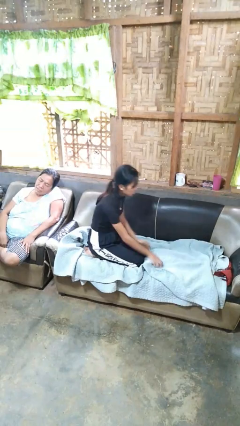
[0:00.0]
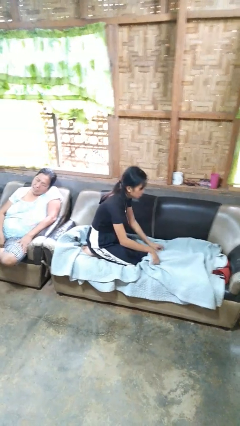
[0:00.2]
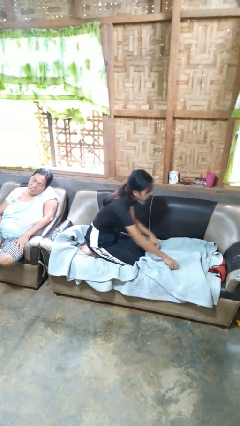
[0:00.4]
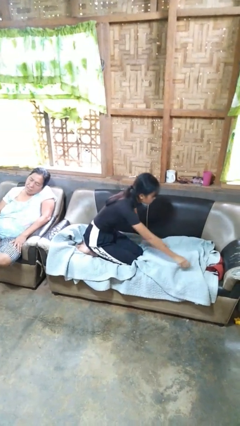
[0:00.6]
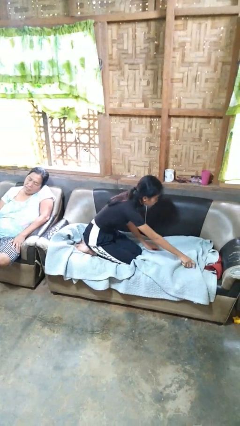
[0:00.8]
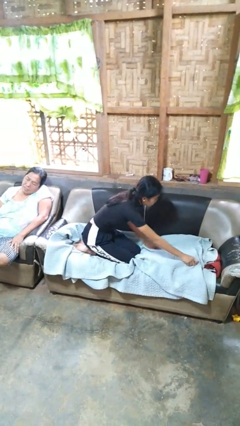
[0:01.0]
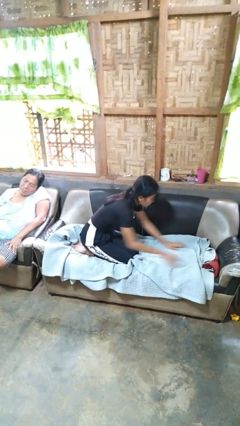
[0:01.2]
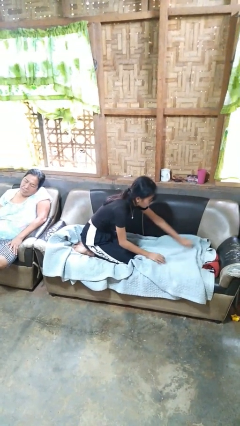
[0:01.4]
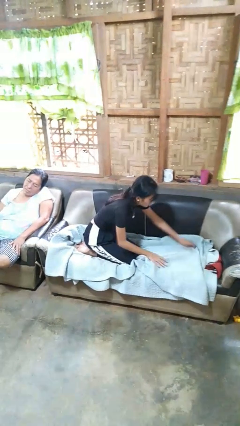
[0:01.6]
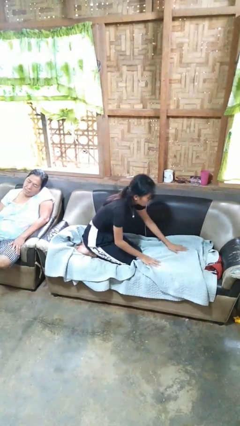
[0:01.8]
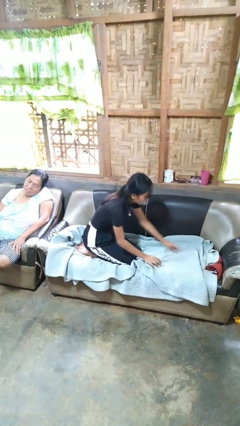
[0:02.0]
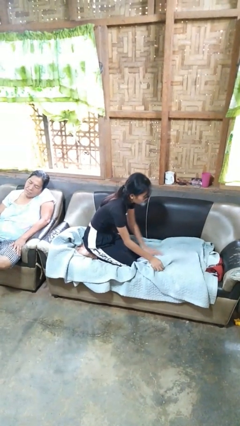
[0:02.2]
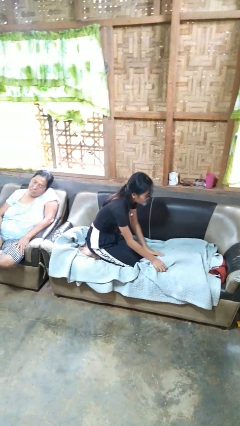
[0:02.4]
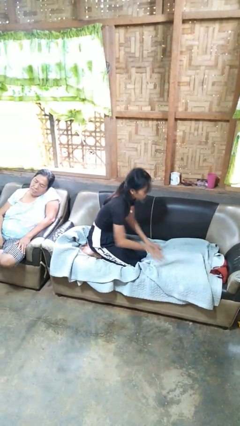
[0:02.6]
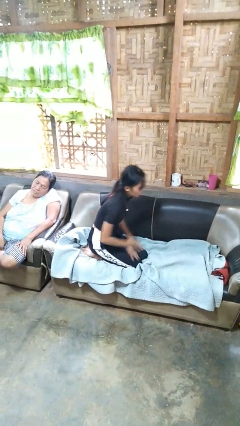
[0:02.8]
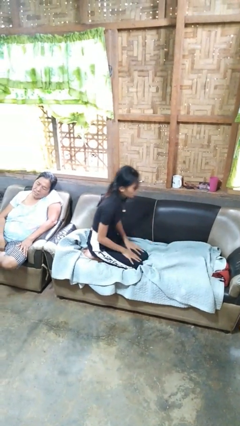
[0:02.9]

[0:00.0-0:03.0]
person searches in couch

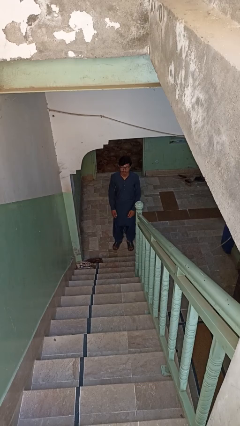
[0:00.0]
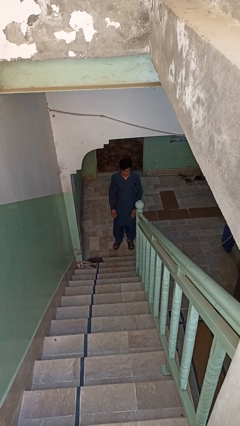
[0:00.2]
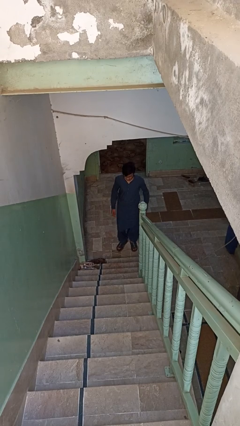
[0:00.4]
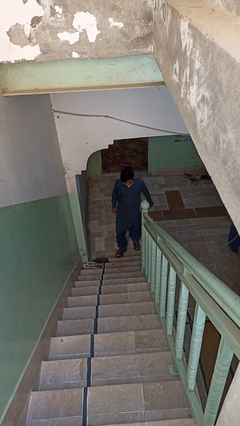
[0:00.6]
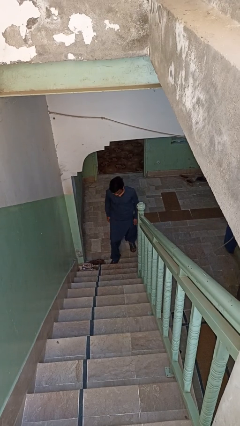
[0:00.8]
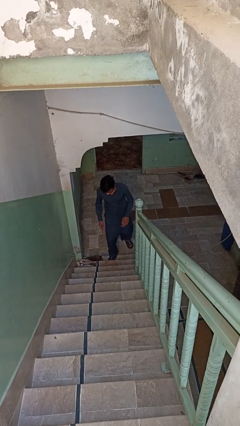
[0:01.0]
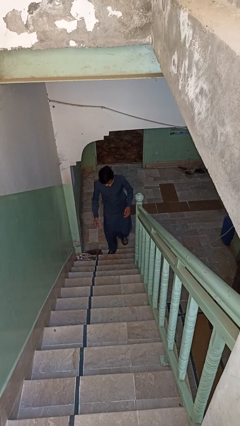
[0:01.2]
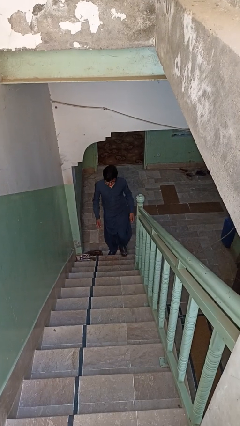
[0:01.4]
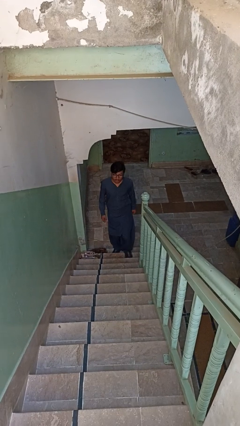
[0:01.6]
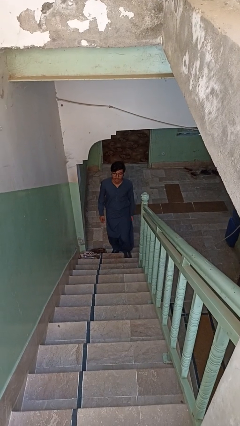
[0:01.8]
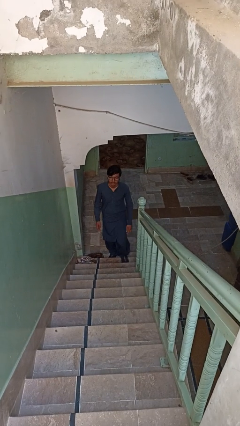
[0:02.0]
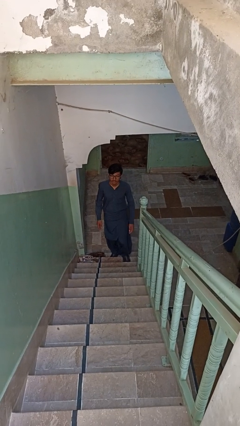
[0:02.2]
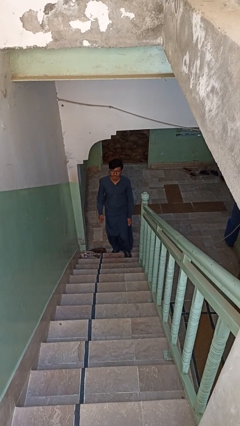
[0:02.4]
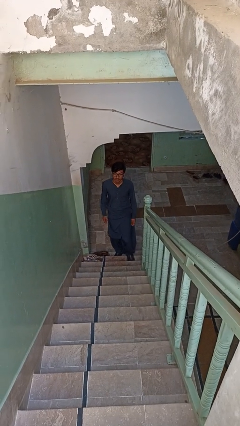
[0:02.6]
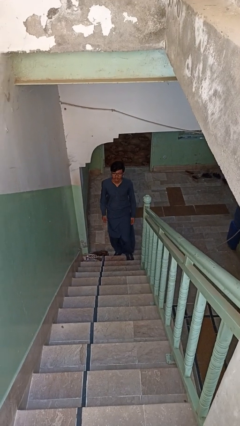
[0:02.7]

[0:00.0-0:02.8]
person climbs up stairs

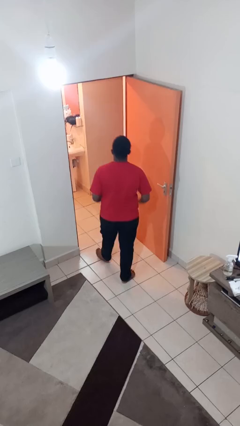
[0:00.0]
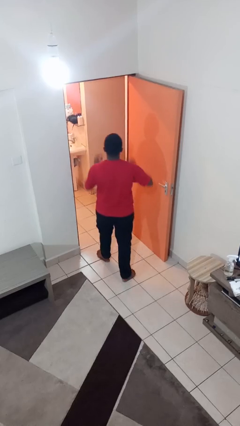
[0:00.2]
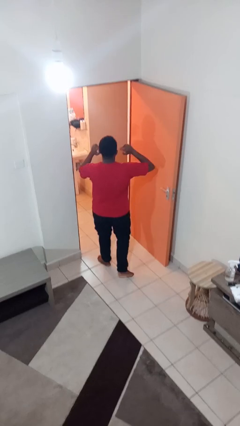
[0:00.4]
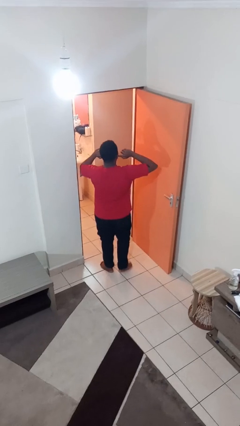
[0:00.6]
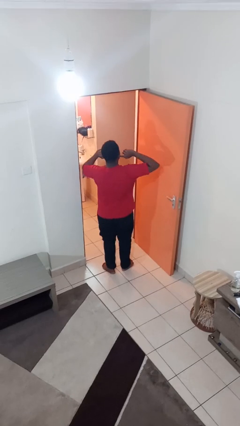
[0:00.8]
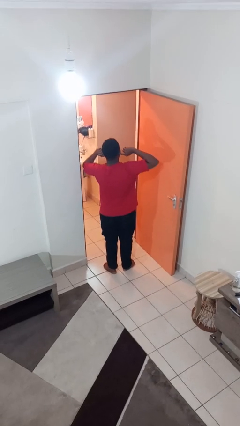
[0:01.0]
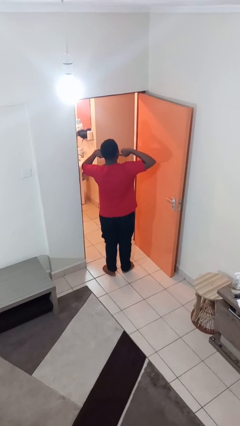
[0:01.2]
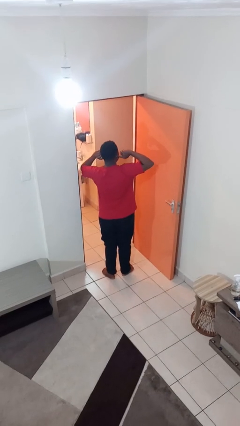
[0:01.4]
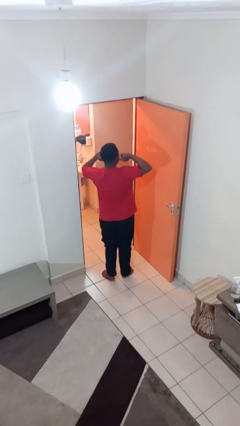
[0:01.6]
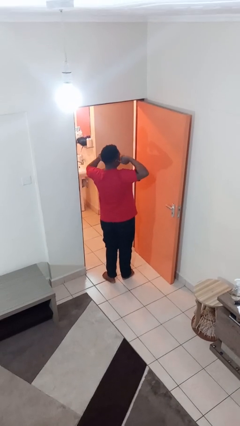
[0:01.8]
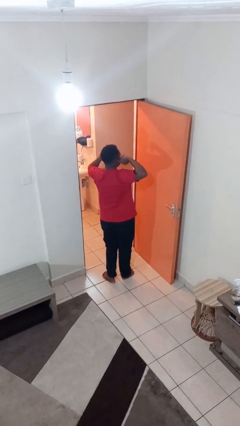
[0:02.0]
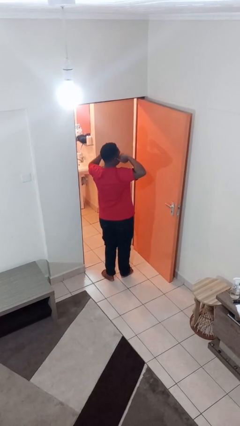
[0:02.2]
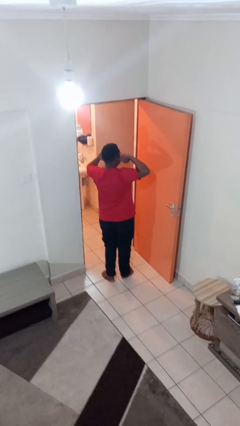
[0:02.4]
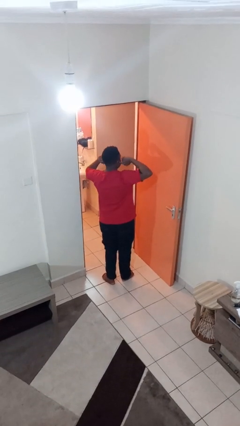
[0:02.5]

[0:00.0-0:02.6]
person puts fingers in ear

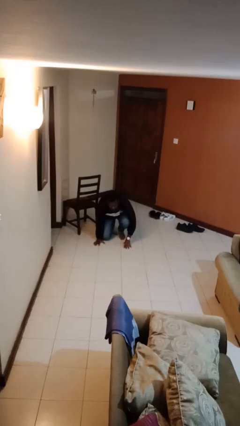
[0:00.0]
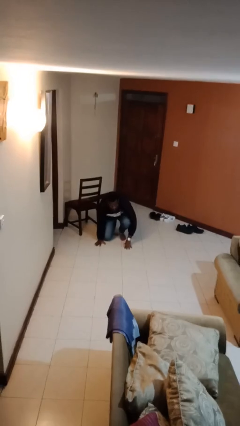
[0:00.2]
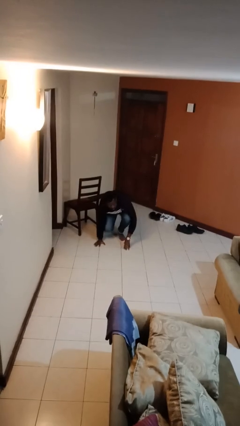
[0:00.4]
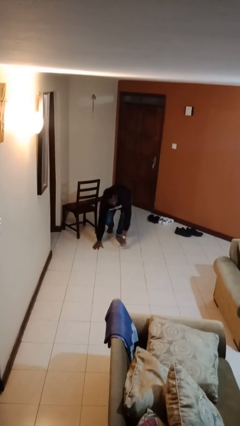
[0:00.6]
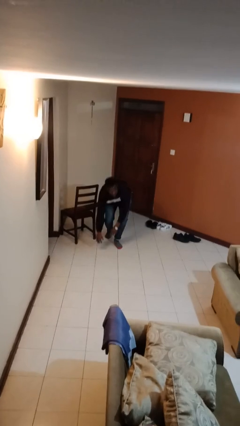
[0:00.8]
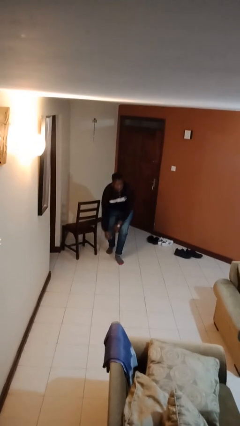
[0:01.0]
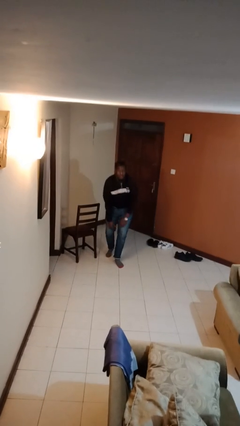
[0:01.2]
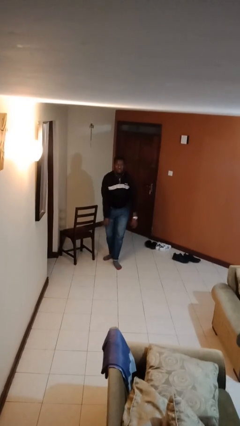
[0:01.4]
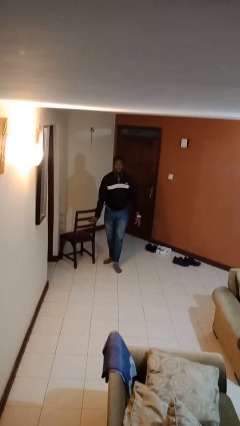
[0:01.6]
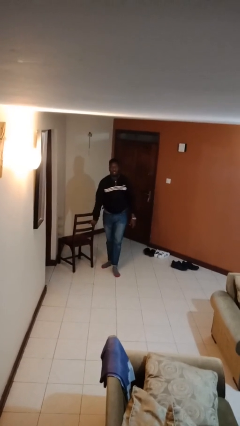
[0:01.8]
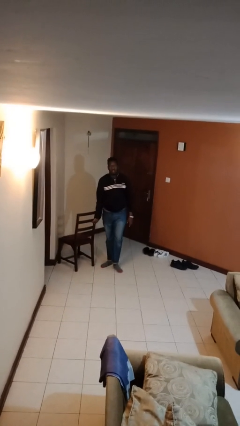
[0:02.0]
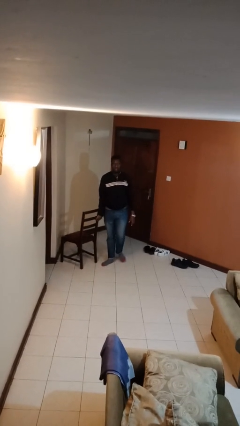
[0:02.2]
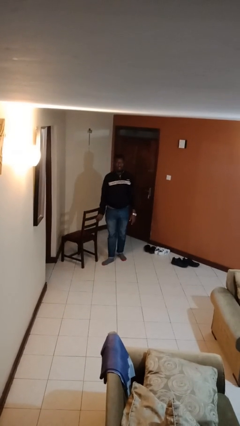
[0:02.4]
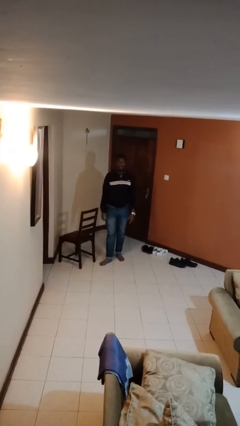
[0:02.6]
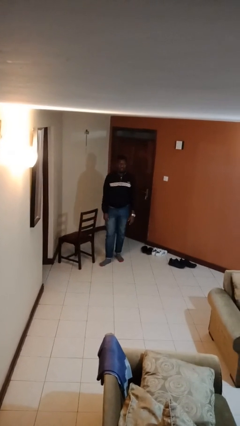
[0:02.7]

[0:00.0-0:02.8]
person stands up from floor

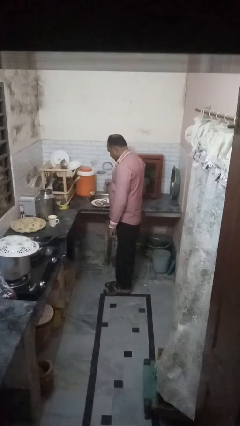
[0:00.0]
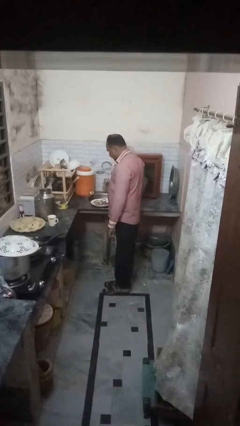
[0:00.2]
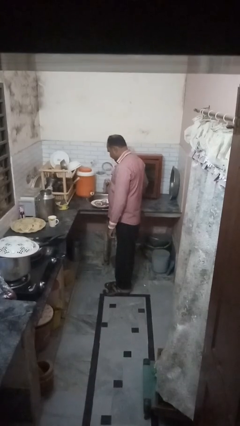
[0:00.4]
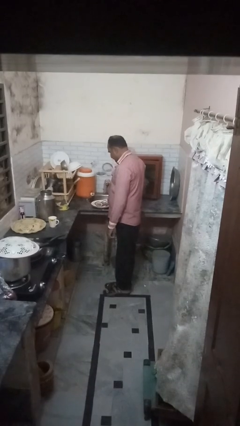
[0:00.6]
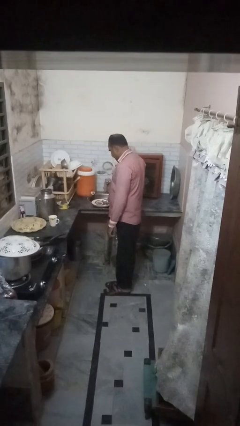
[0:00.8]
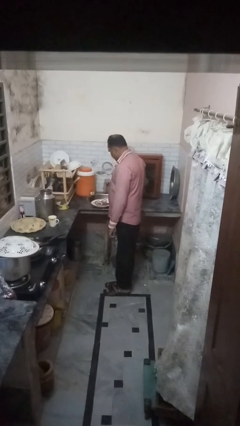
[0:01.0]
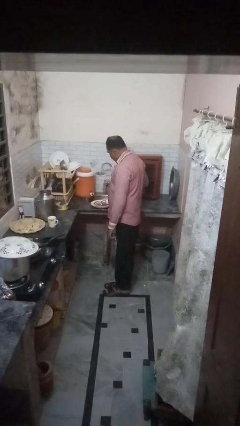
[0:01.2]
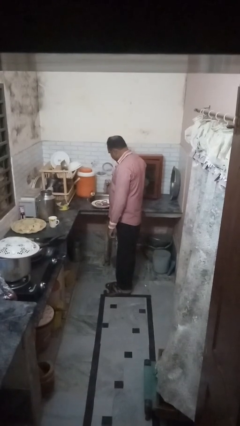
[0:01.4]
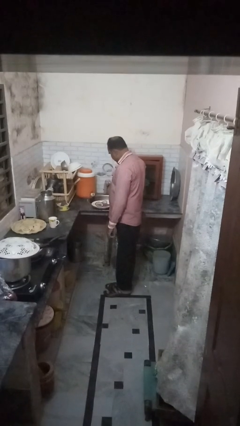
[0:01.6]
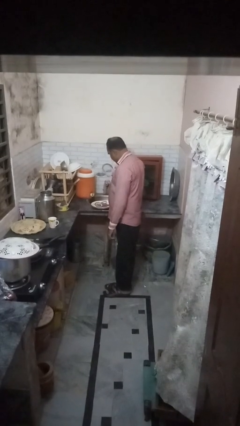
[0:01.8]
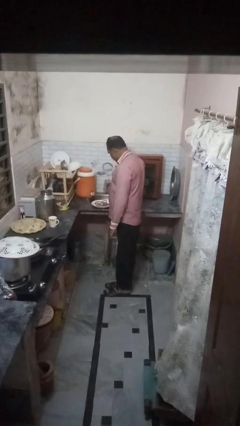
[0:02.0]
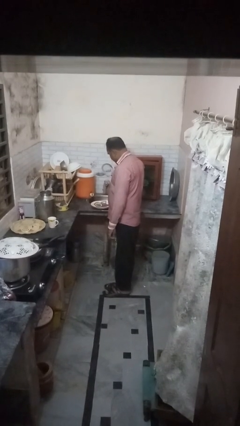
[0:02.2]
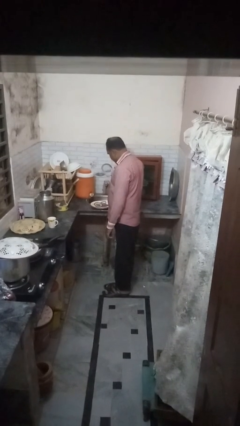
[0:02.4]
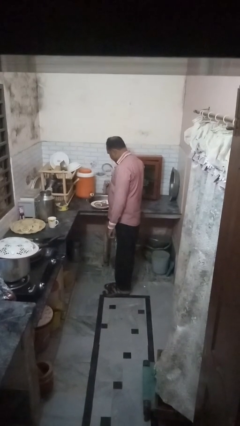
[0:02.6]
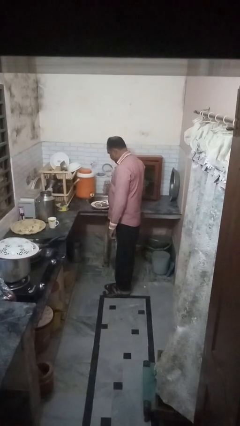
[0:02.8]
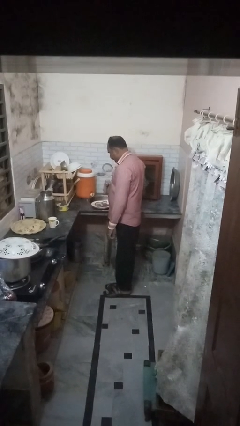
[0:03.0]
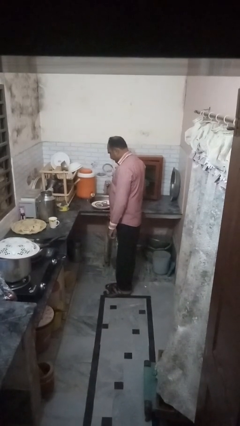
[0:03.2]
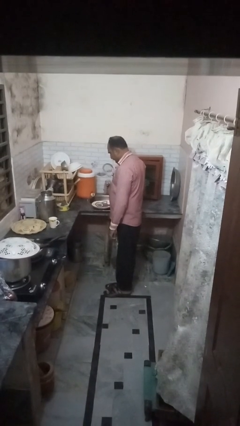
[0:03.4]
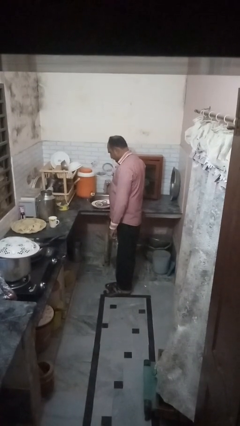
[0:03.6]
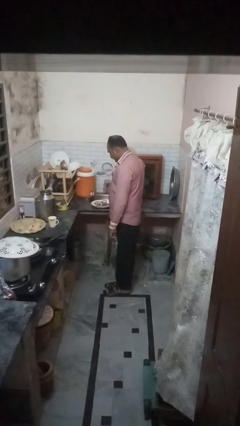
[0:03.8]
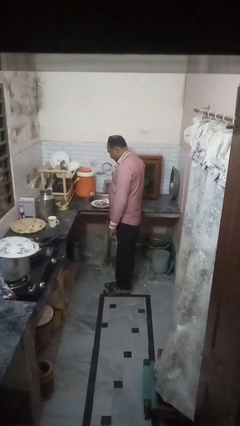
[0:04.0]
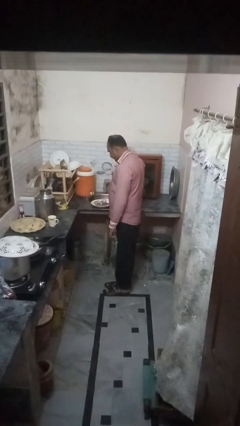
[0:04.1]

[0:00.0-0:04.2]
person loads dishwasher

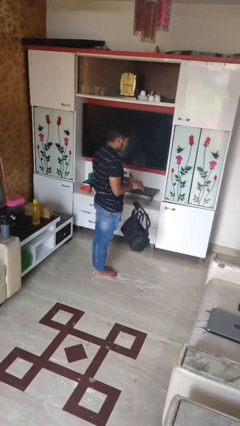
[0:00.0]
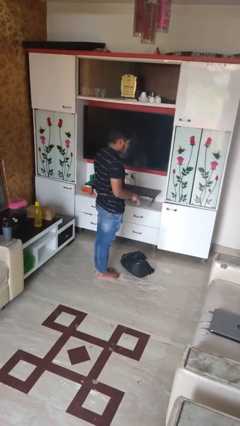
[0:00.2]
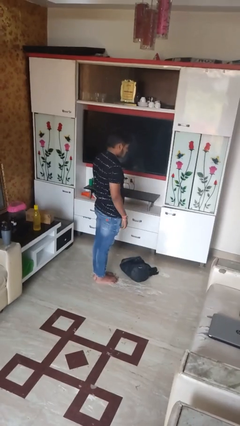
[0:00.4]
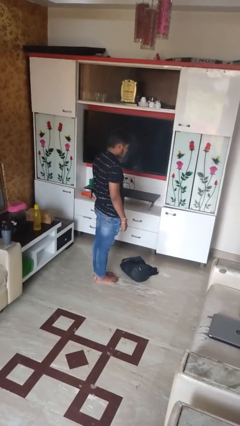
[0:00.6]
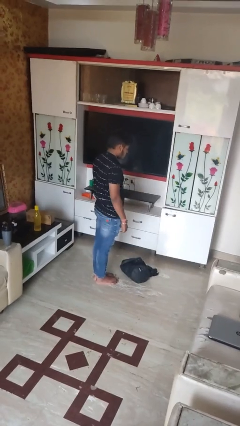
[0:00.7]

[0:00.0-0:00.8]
person drops object

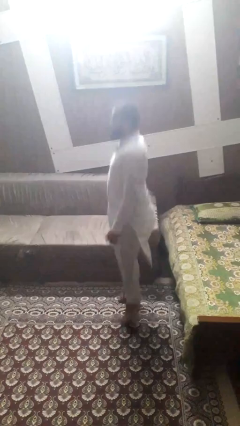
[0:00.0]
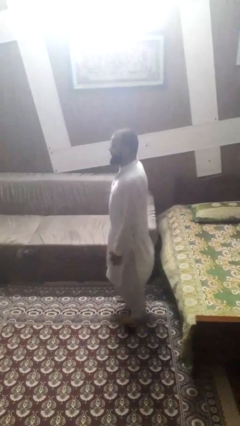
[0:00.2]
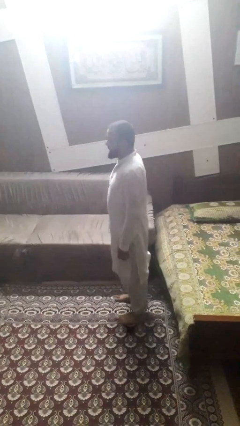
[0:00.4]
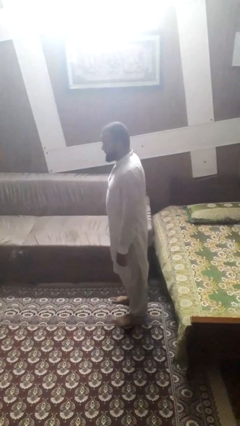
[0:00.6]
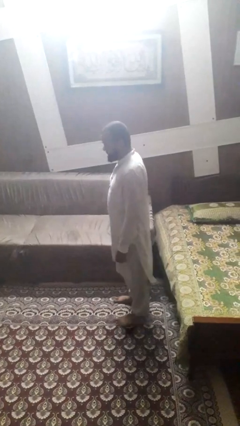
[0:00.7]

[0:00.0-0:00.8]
person jumps
